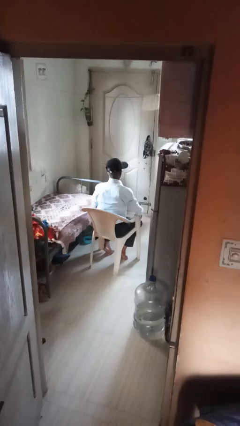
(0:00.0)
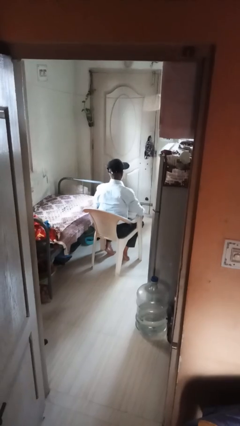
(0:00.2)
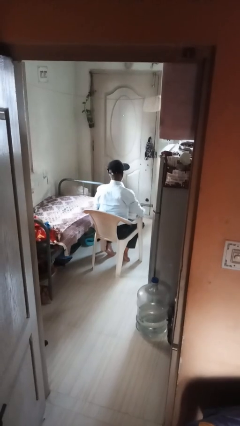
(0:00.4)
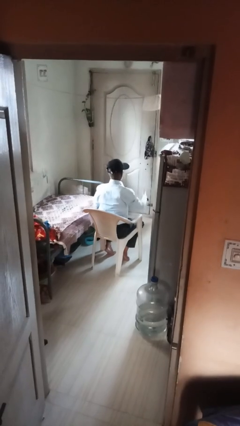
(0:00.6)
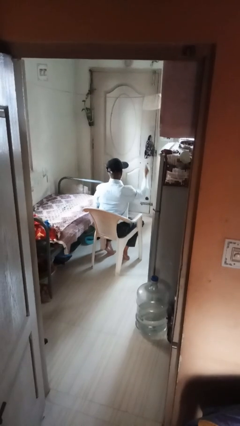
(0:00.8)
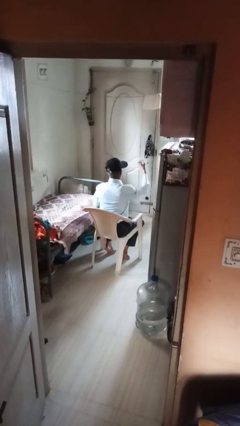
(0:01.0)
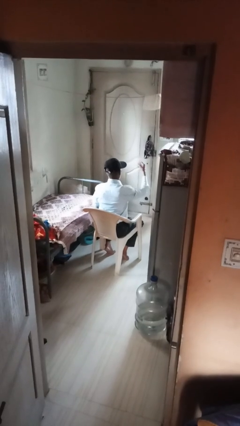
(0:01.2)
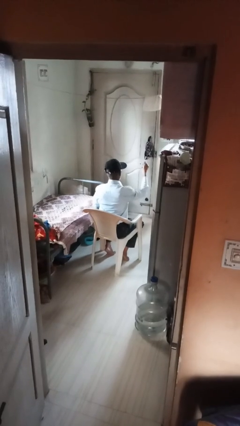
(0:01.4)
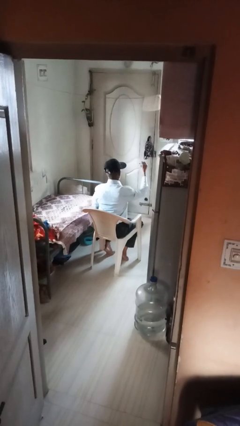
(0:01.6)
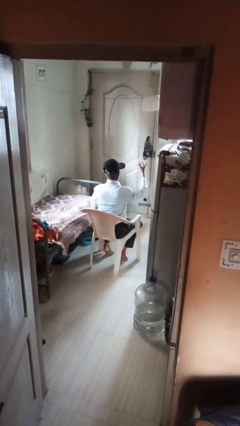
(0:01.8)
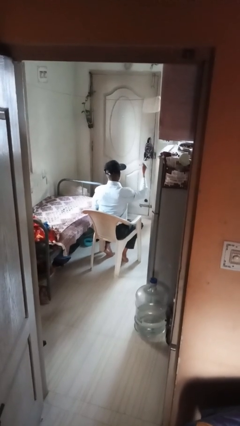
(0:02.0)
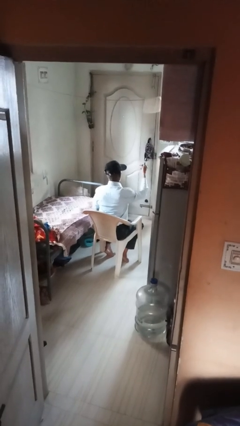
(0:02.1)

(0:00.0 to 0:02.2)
person snaps fingers

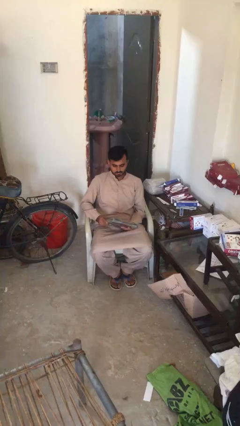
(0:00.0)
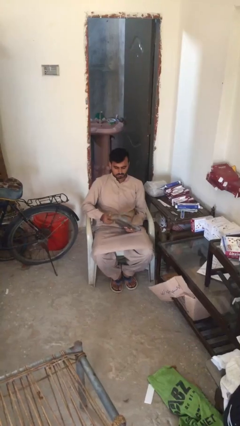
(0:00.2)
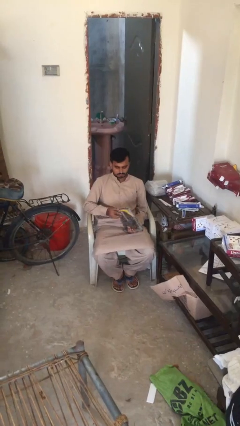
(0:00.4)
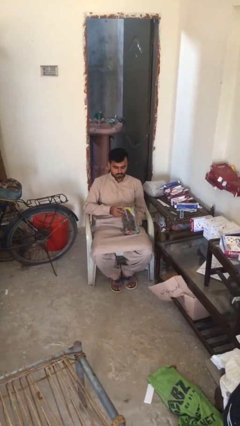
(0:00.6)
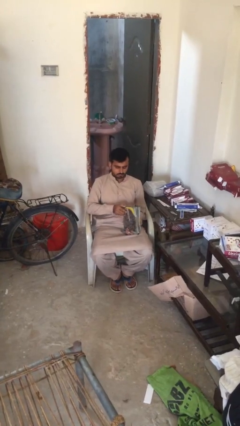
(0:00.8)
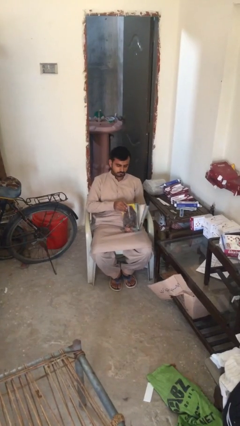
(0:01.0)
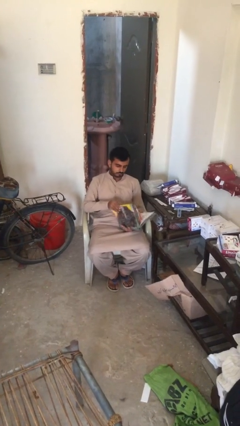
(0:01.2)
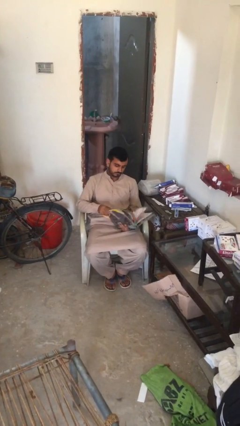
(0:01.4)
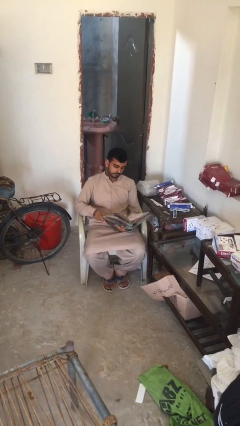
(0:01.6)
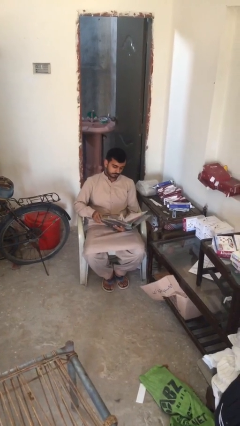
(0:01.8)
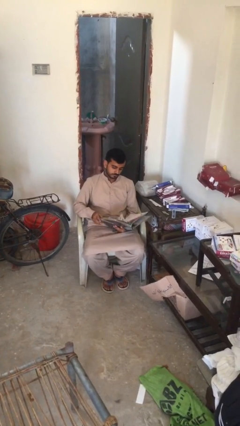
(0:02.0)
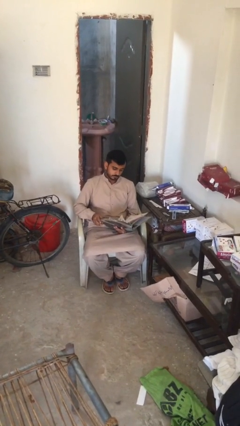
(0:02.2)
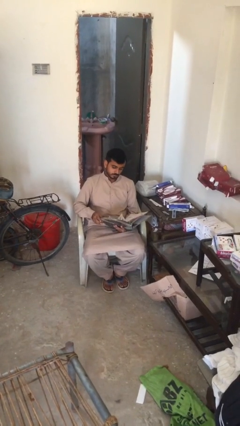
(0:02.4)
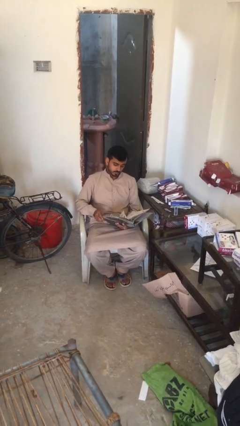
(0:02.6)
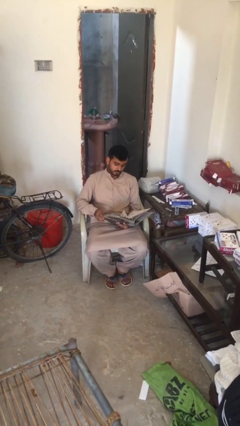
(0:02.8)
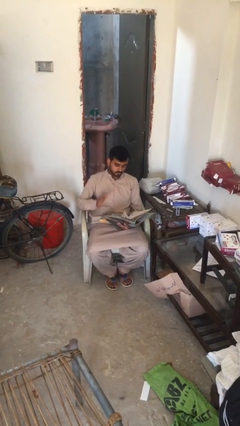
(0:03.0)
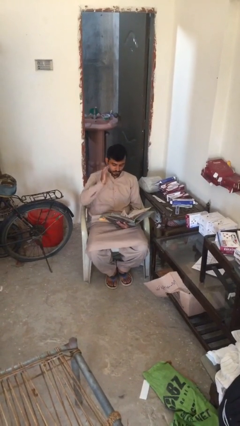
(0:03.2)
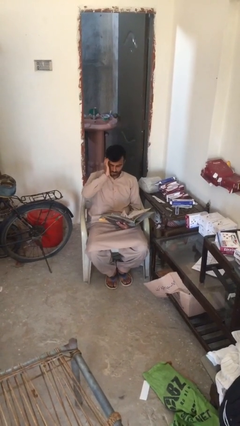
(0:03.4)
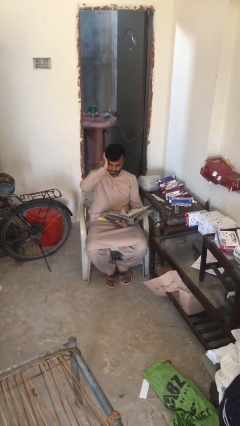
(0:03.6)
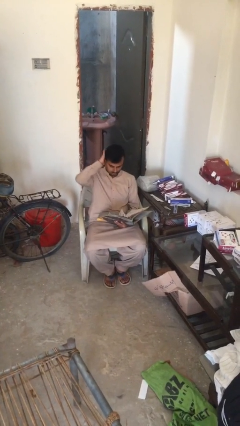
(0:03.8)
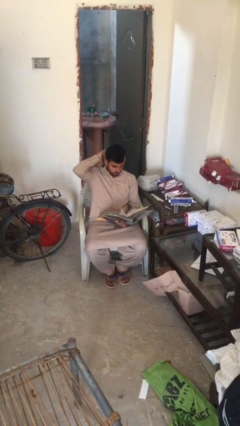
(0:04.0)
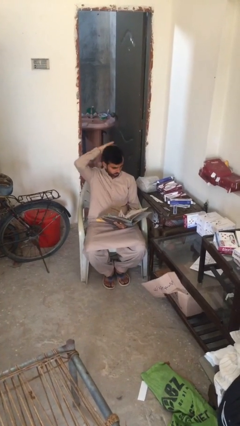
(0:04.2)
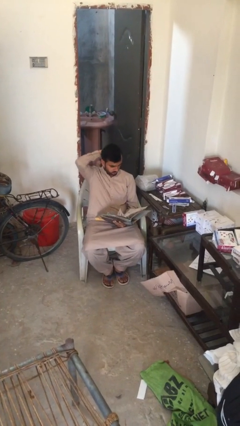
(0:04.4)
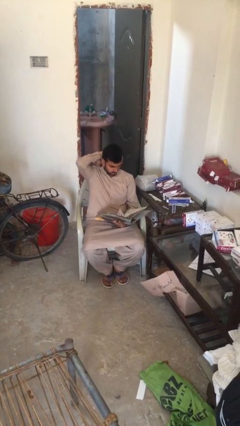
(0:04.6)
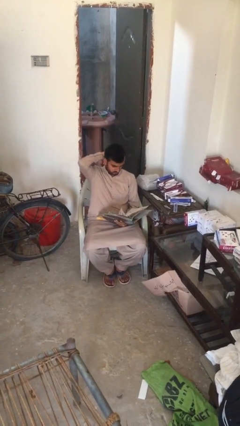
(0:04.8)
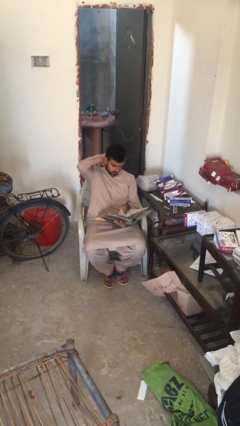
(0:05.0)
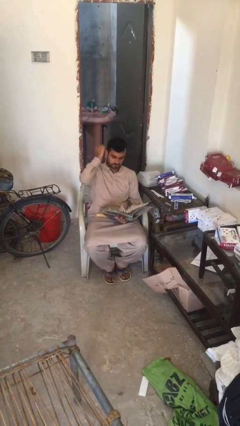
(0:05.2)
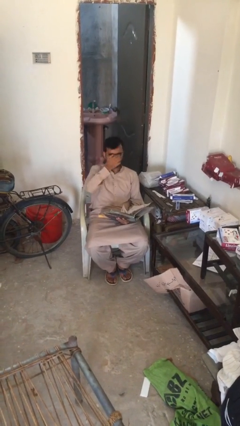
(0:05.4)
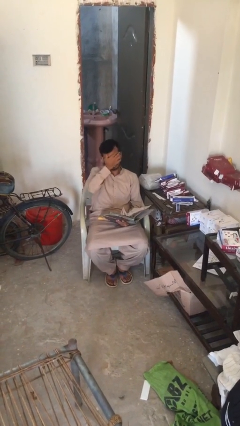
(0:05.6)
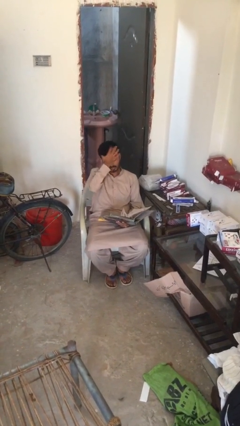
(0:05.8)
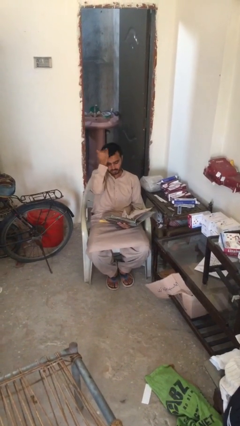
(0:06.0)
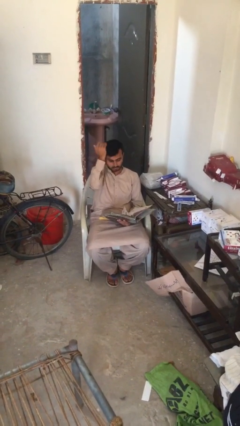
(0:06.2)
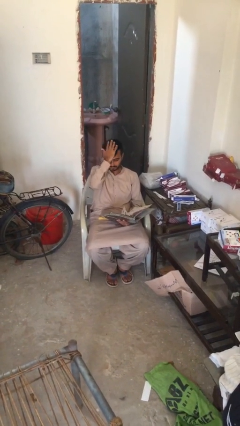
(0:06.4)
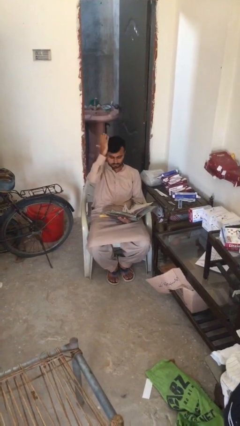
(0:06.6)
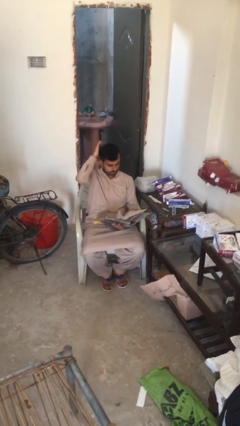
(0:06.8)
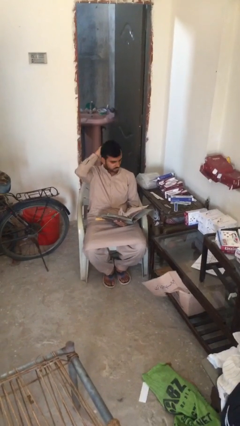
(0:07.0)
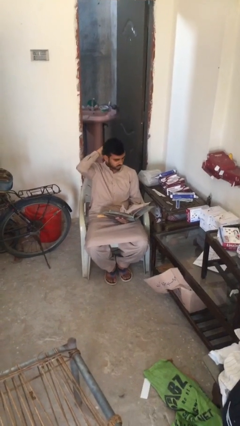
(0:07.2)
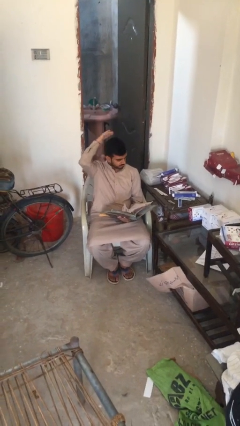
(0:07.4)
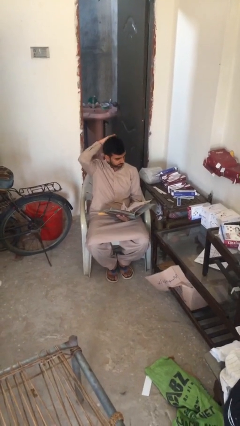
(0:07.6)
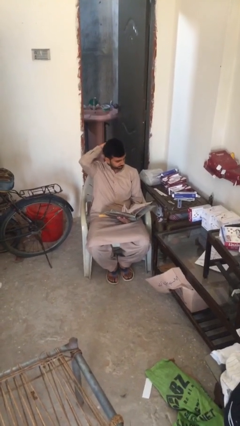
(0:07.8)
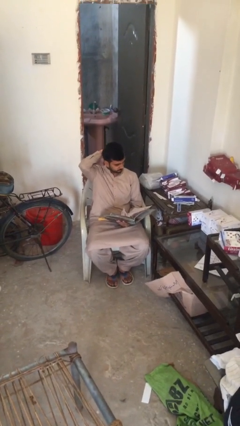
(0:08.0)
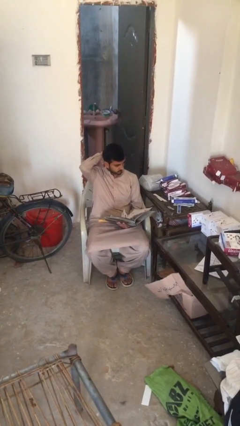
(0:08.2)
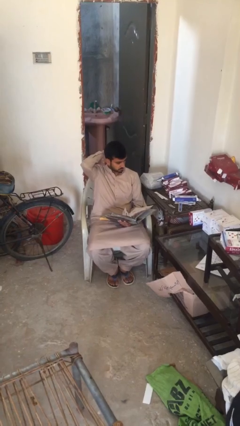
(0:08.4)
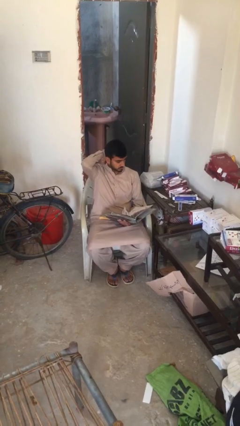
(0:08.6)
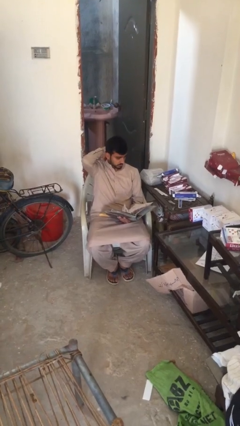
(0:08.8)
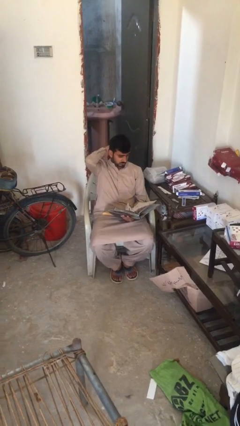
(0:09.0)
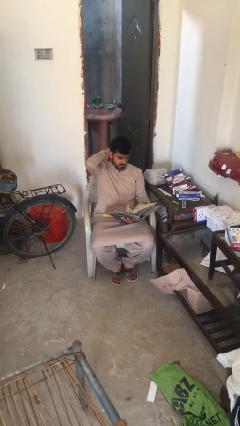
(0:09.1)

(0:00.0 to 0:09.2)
person reads document

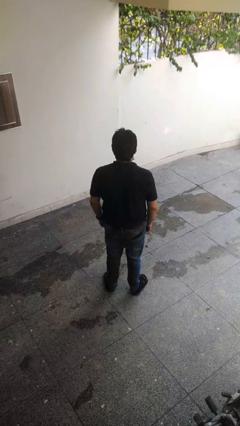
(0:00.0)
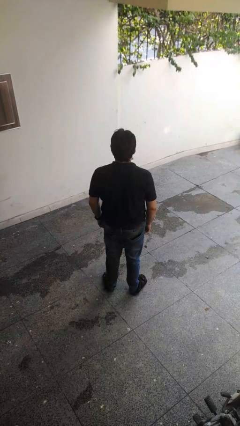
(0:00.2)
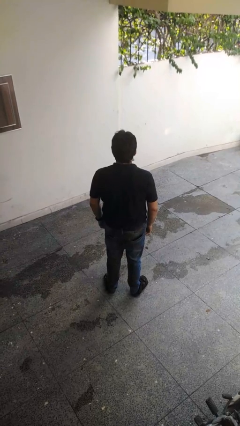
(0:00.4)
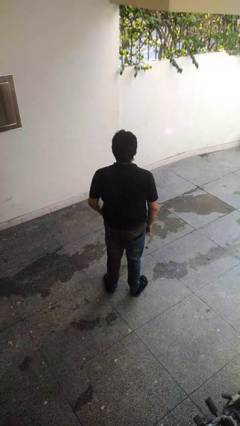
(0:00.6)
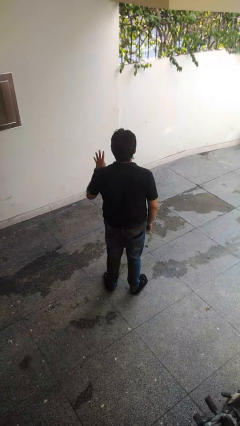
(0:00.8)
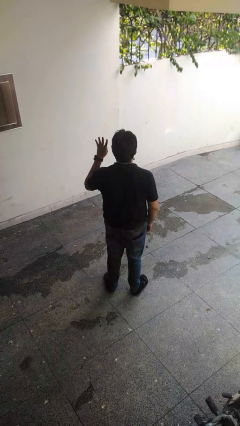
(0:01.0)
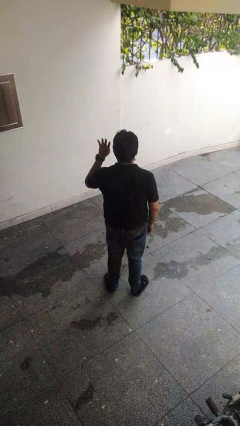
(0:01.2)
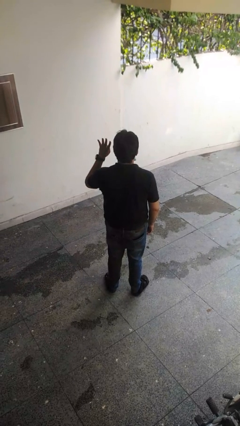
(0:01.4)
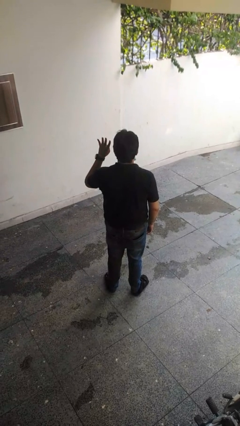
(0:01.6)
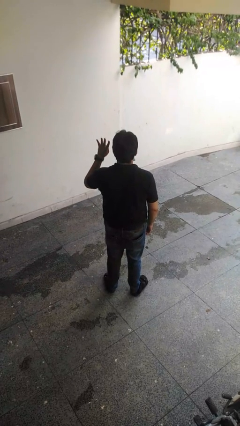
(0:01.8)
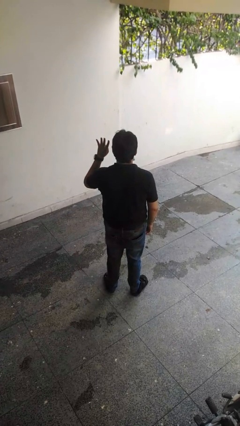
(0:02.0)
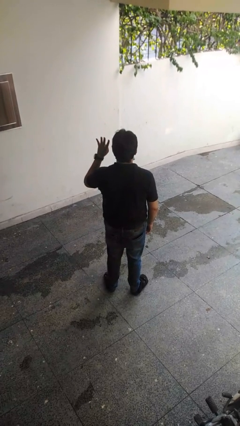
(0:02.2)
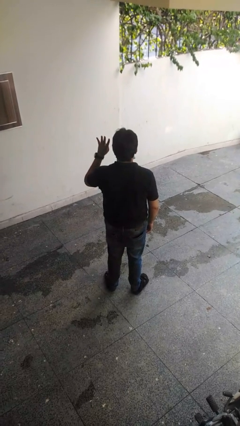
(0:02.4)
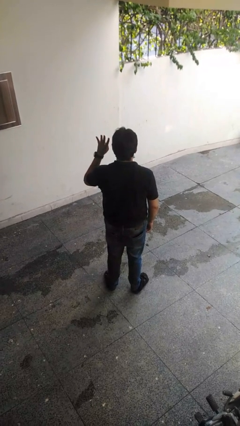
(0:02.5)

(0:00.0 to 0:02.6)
person gestures number four

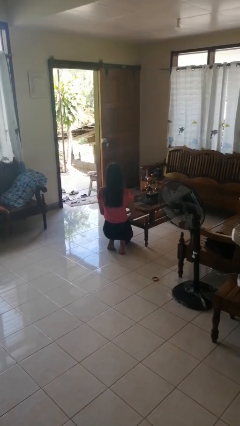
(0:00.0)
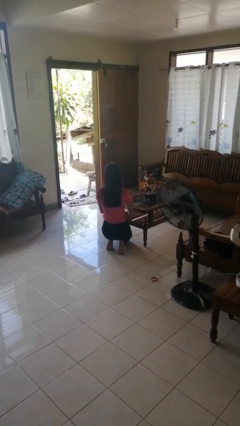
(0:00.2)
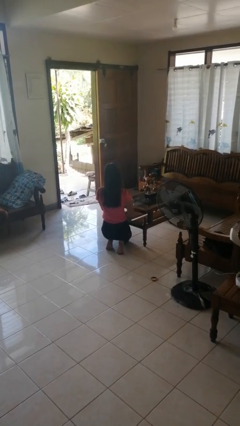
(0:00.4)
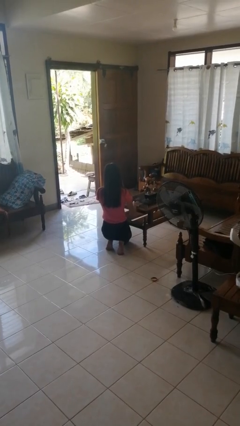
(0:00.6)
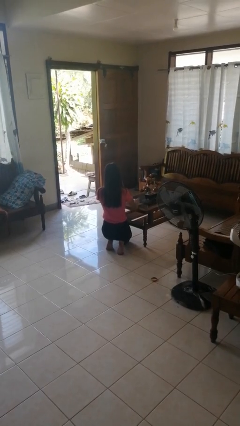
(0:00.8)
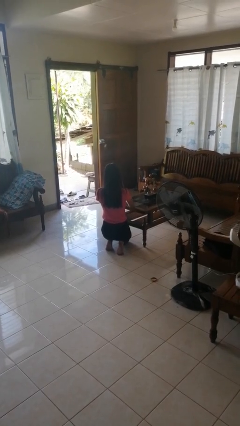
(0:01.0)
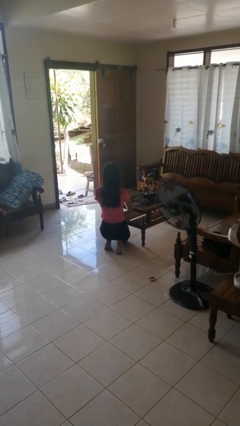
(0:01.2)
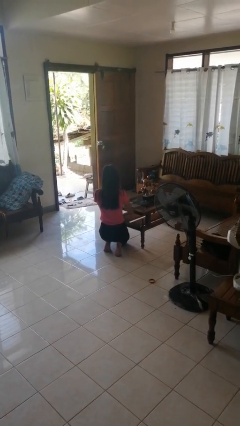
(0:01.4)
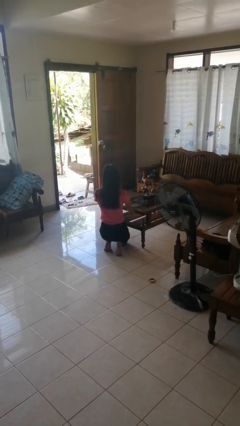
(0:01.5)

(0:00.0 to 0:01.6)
person cleans table with rag

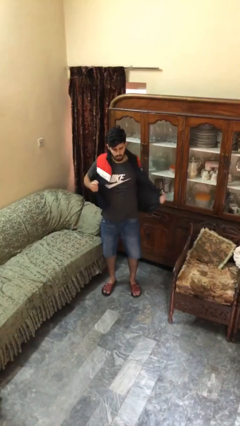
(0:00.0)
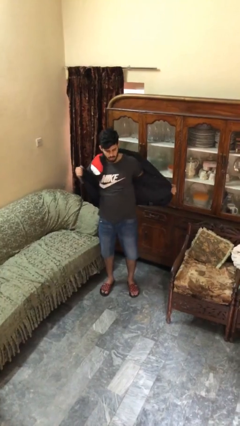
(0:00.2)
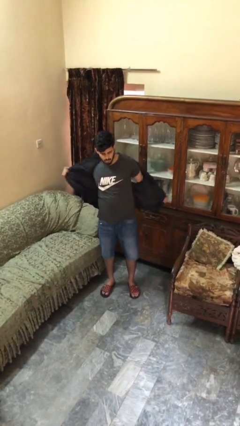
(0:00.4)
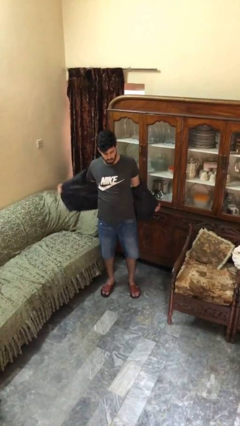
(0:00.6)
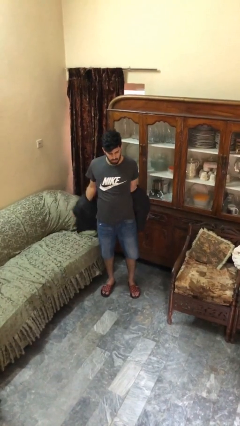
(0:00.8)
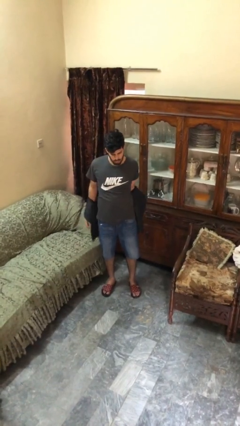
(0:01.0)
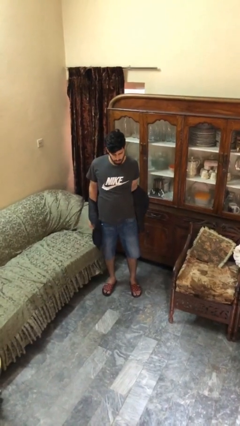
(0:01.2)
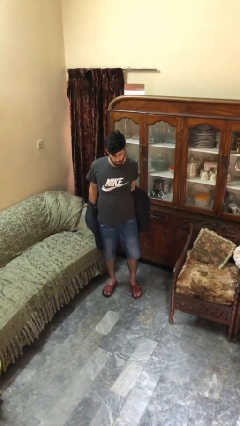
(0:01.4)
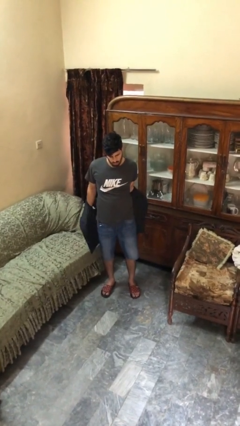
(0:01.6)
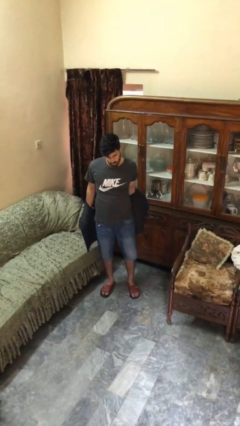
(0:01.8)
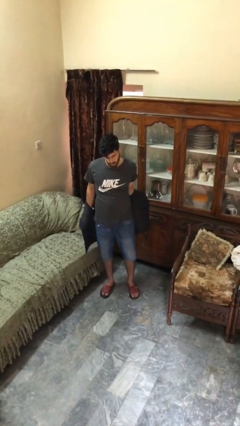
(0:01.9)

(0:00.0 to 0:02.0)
person takes off jacket

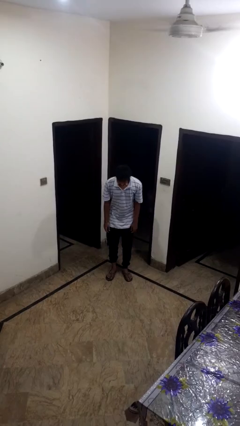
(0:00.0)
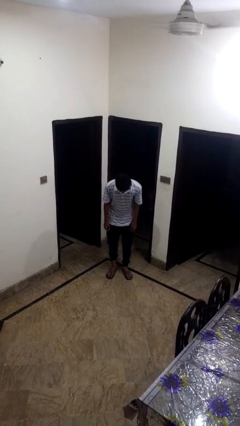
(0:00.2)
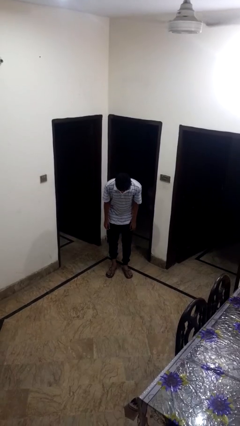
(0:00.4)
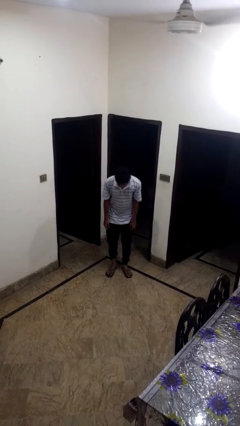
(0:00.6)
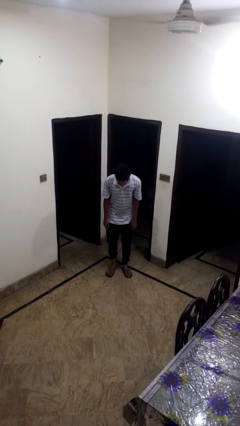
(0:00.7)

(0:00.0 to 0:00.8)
person bows
